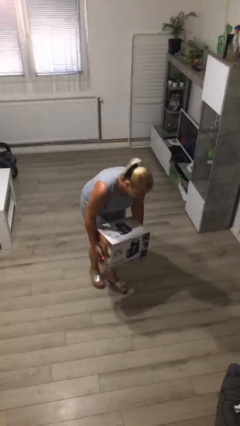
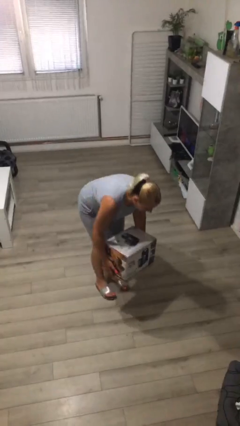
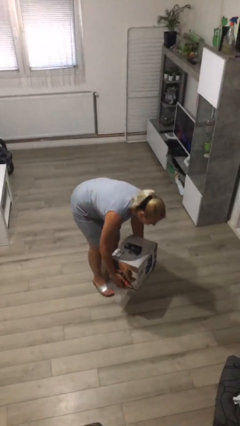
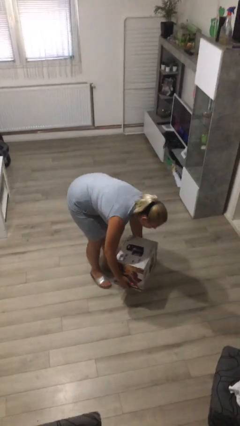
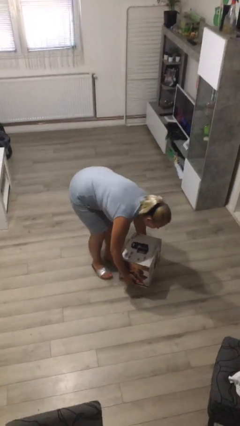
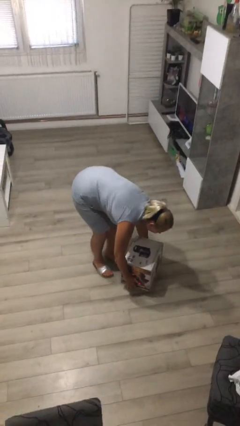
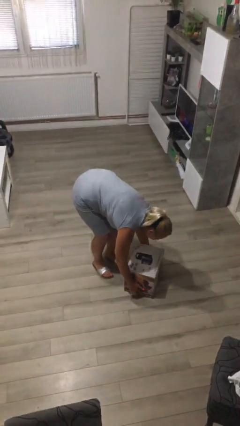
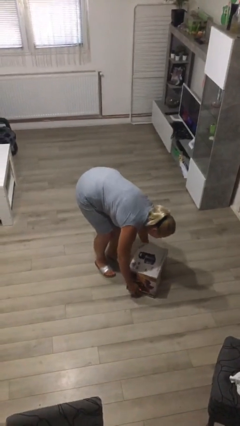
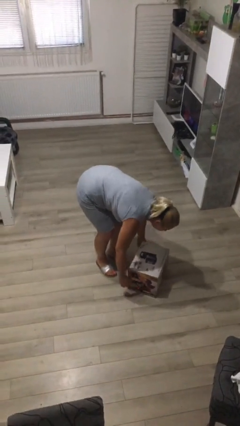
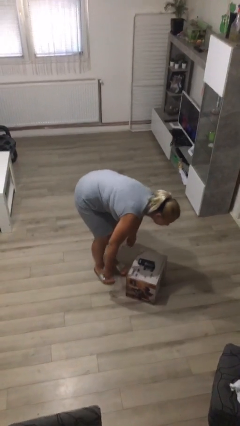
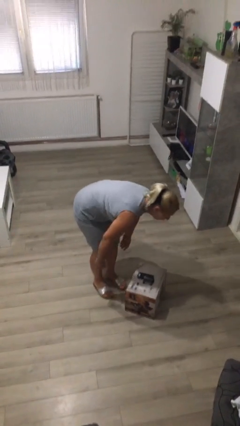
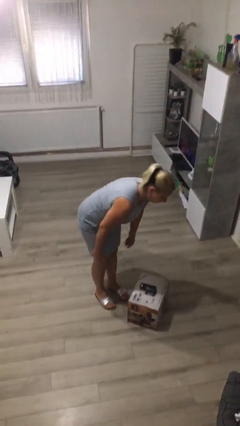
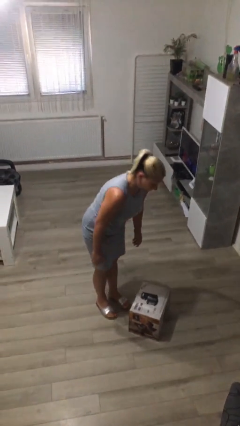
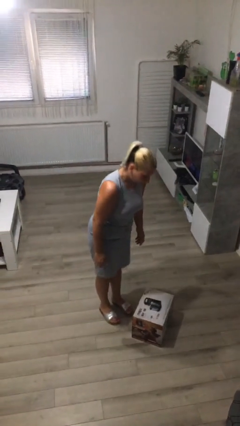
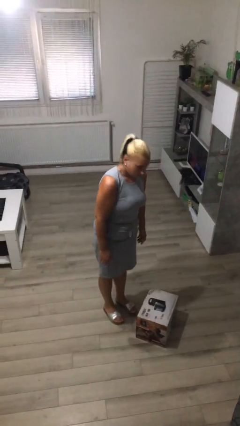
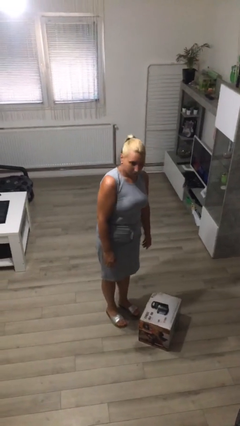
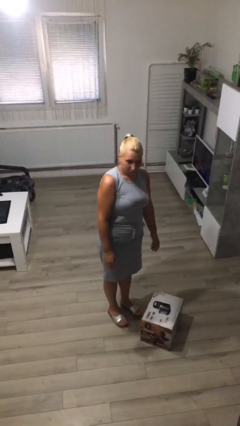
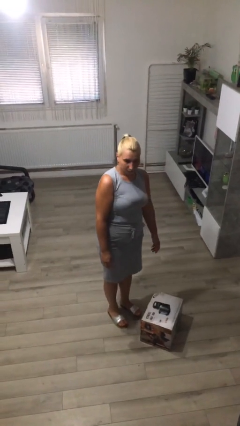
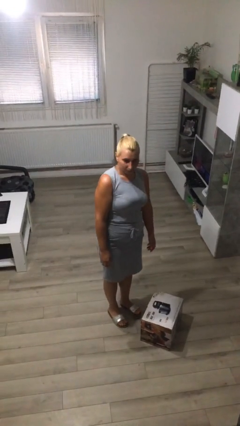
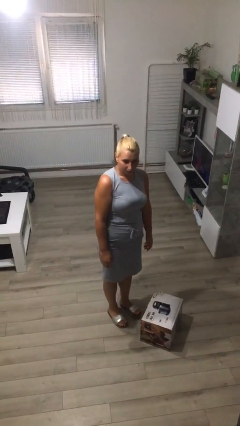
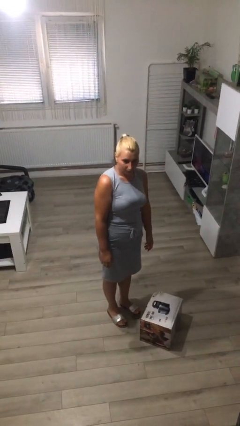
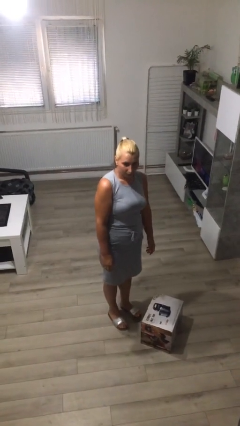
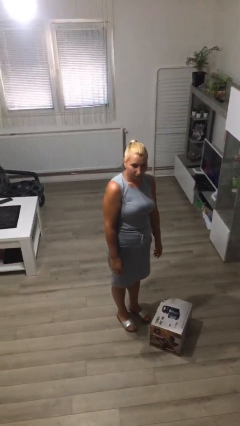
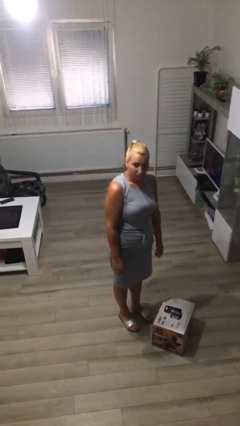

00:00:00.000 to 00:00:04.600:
person puts down object on floor

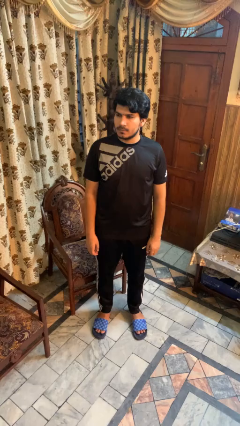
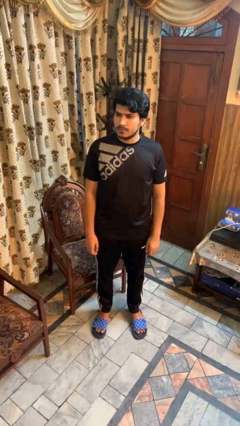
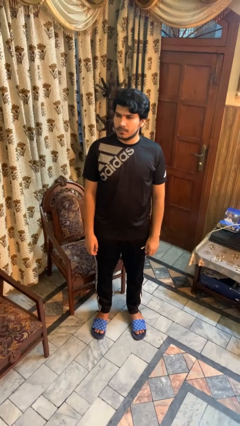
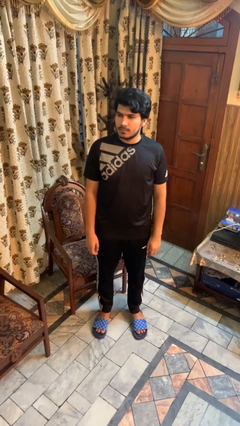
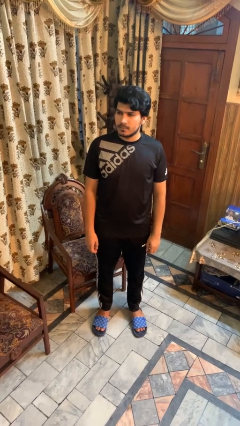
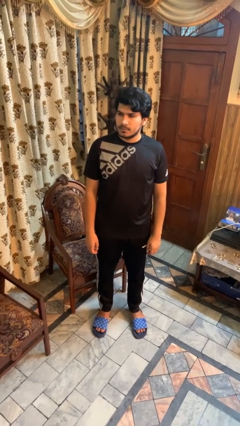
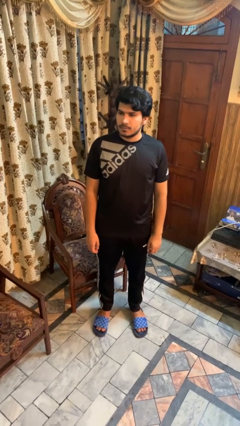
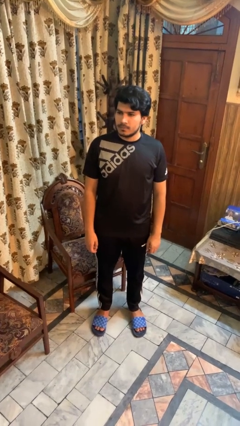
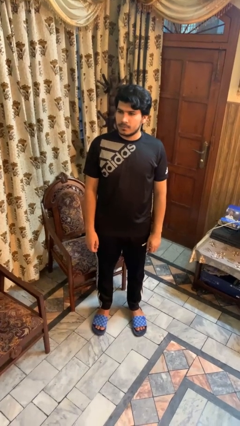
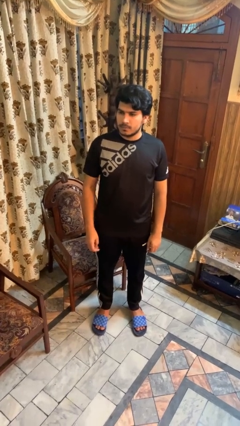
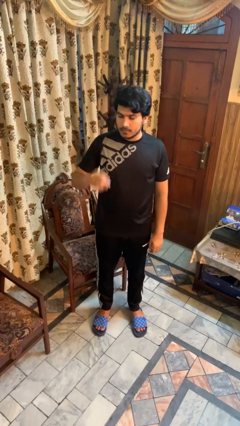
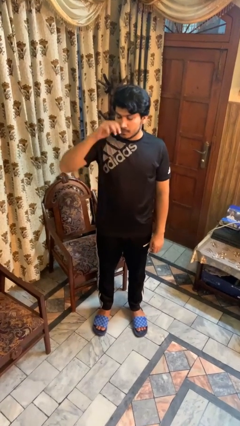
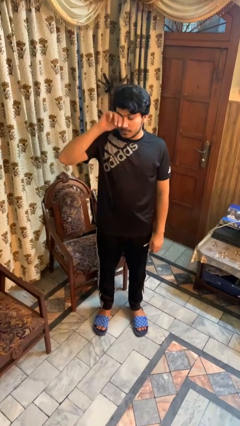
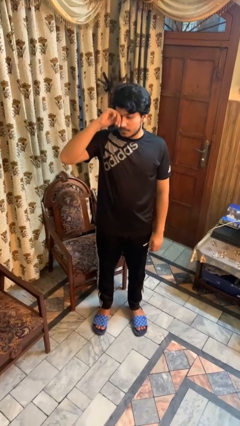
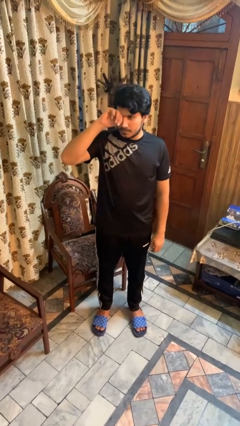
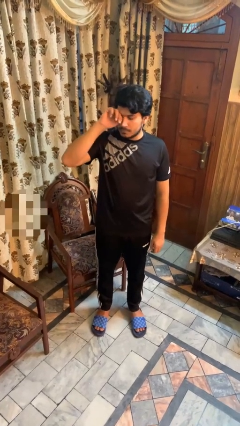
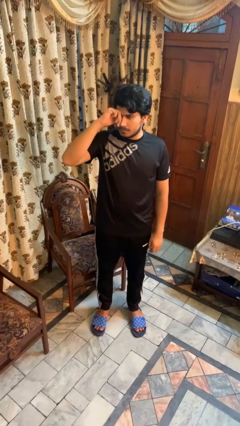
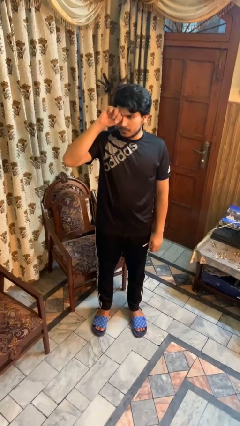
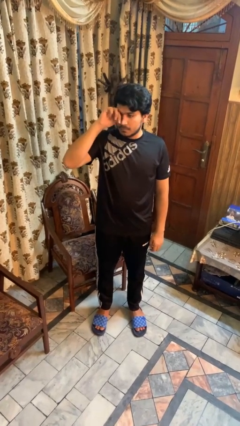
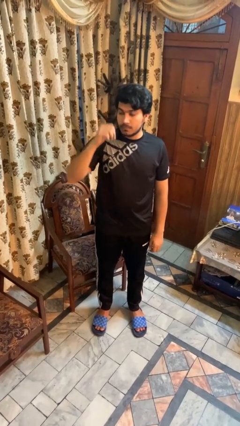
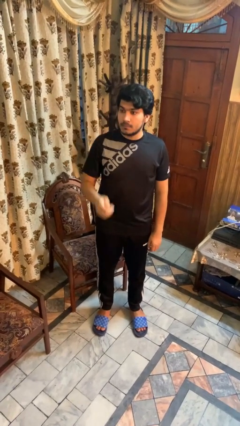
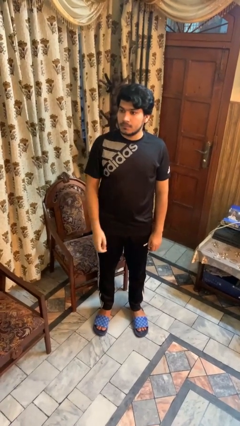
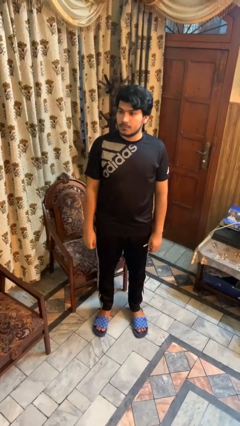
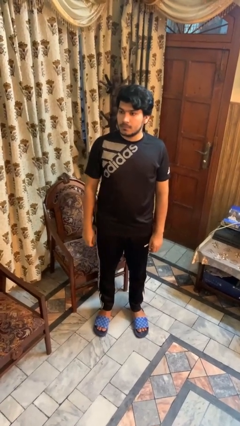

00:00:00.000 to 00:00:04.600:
person rubs eyes

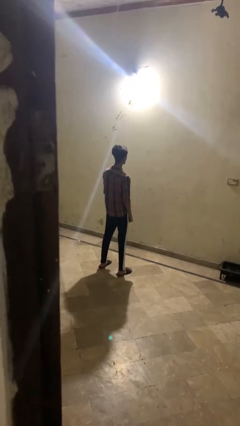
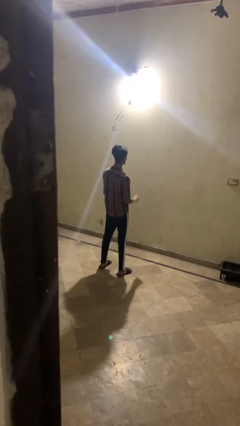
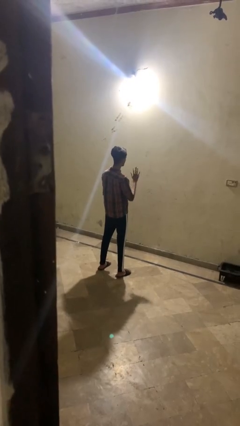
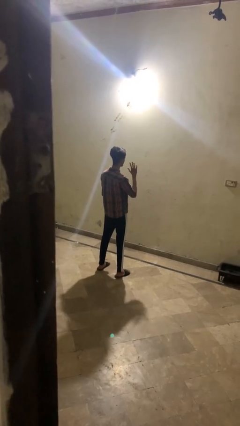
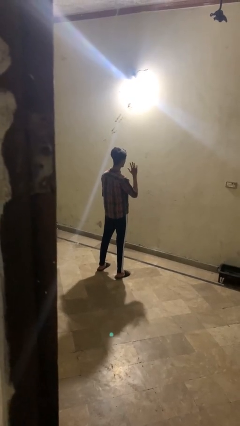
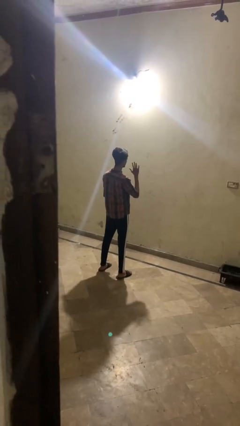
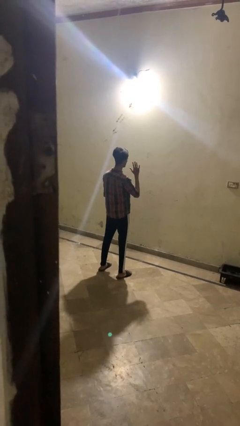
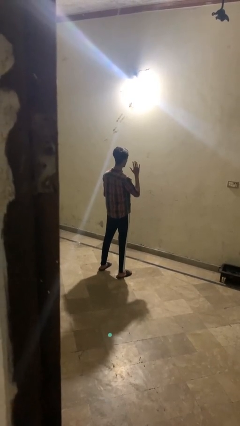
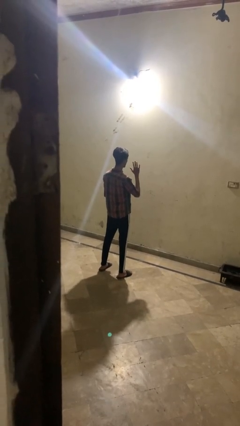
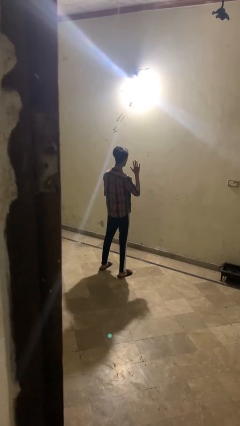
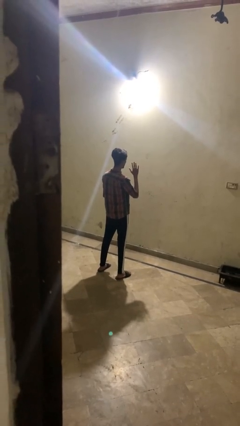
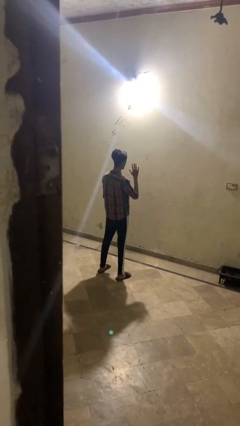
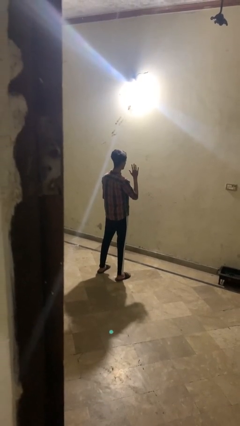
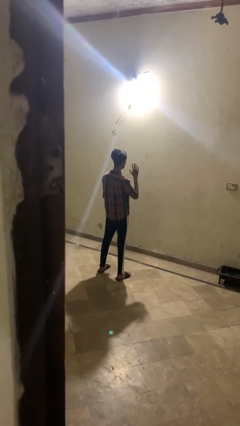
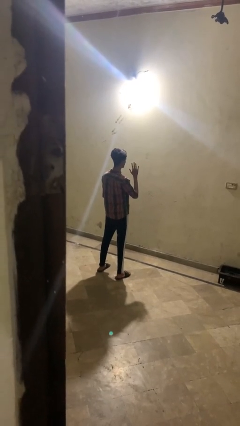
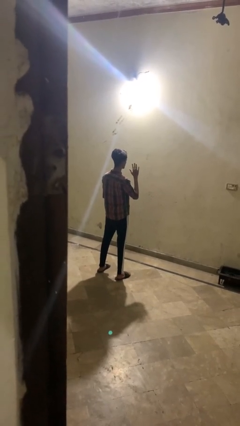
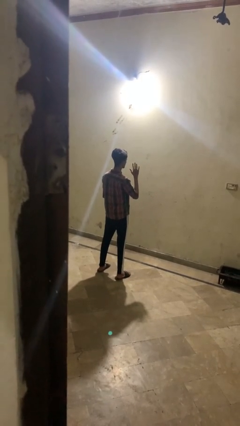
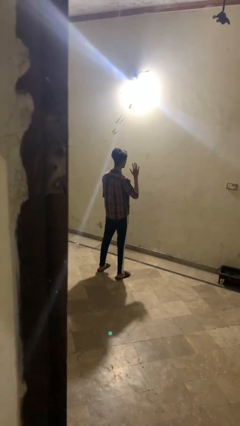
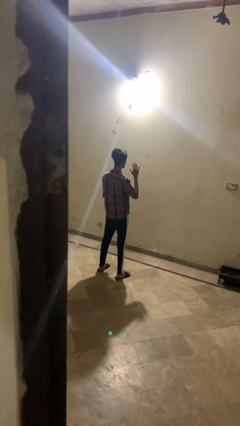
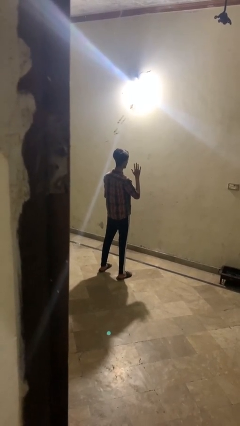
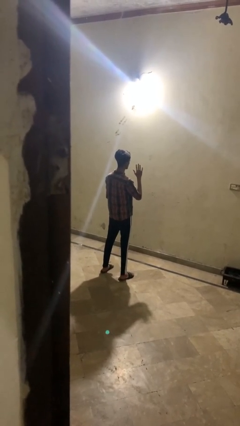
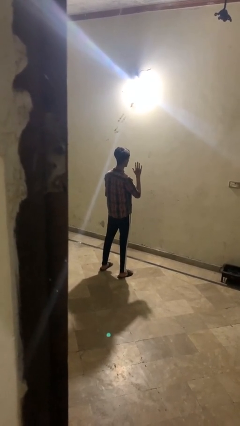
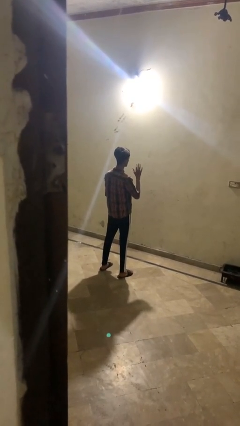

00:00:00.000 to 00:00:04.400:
person gestures number five

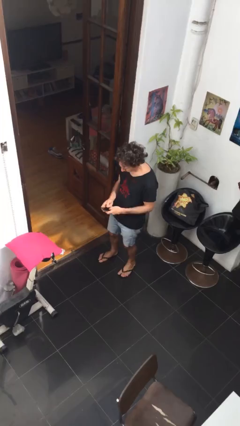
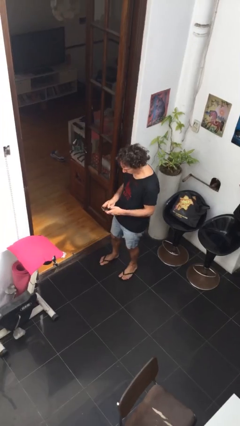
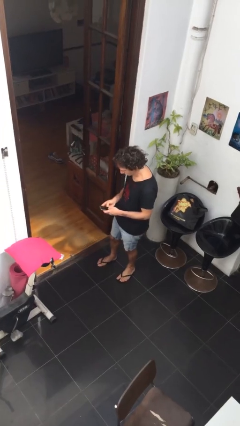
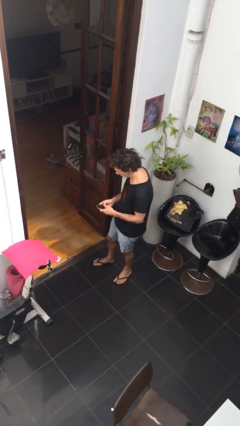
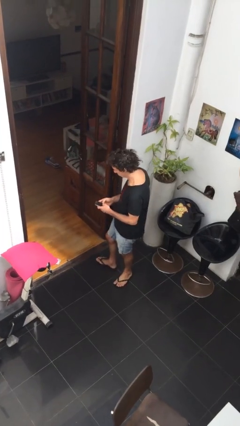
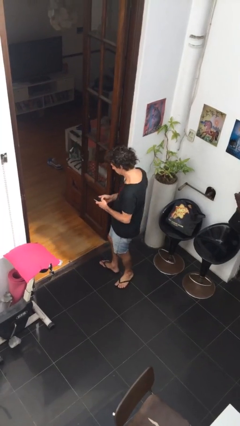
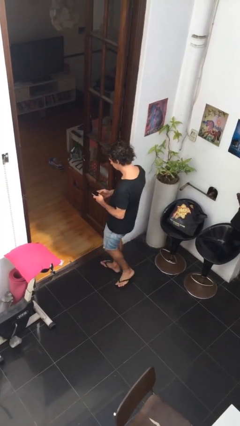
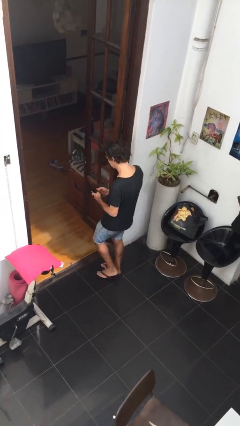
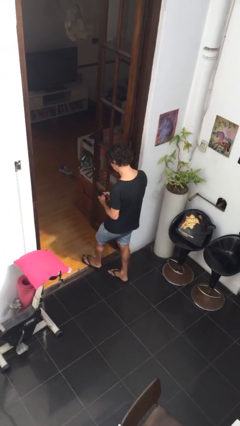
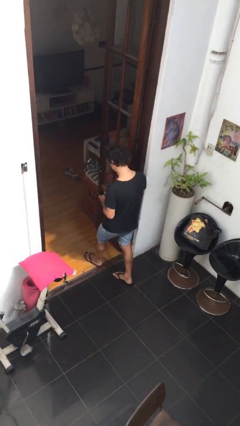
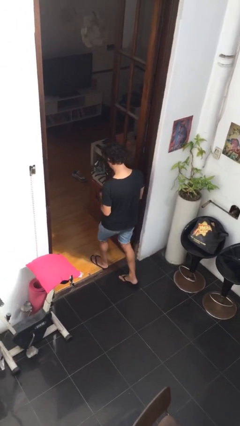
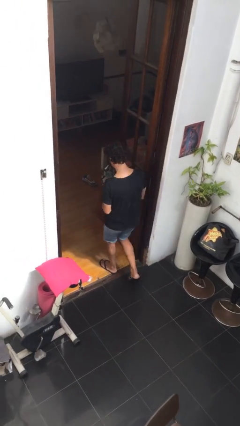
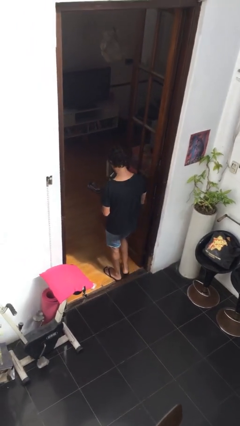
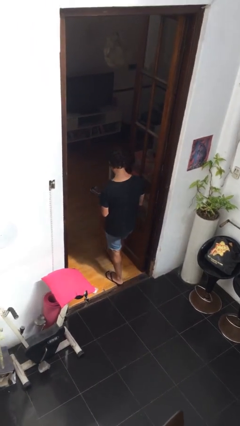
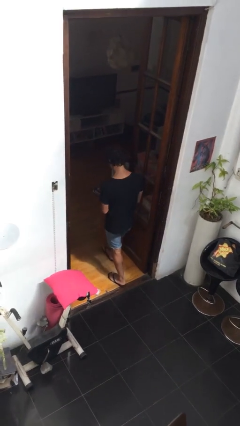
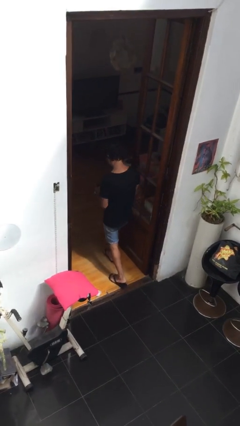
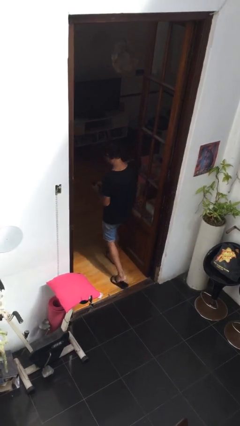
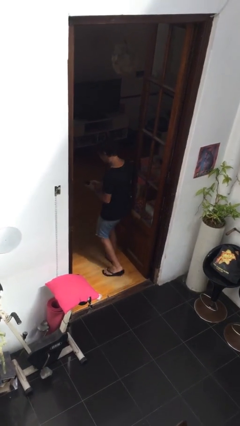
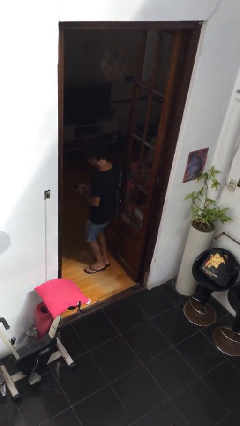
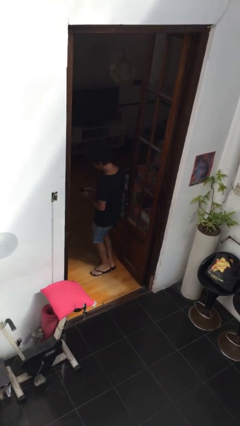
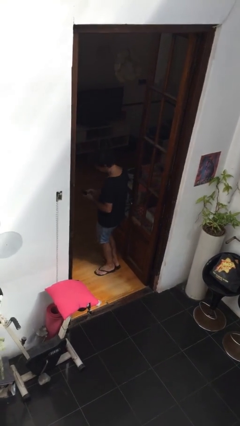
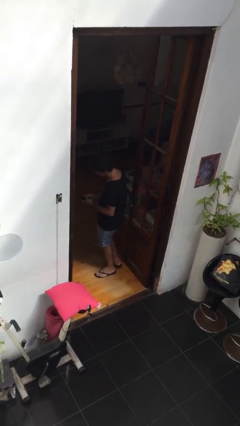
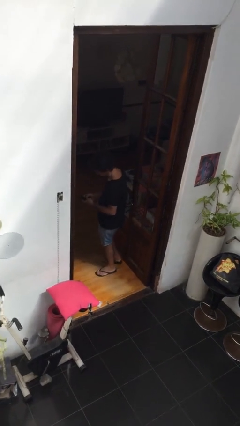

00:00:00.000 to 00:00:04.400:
person exits scene through structure
